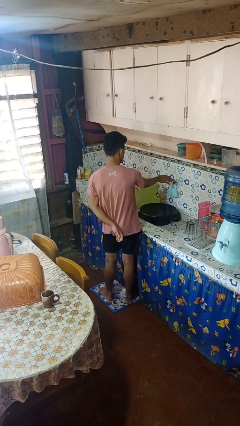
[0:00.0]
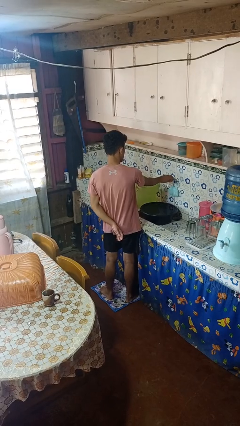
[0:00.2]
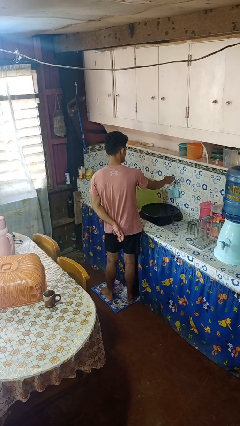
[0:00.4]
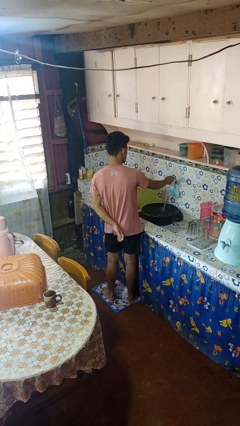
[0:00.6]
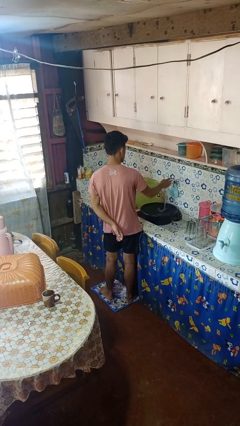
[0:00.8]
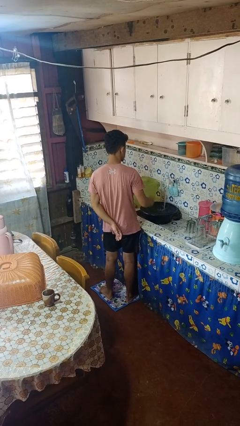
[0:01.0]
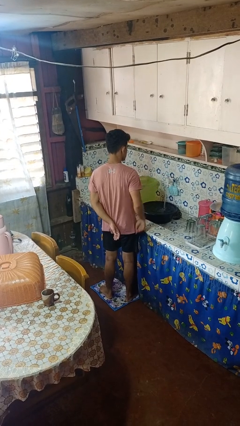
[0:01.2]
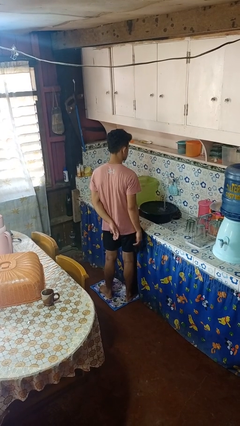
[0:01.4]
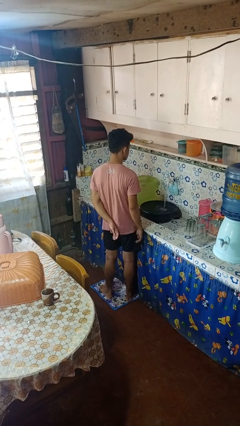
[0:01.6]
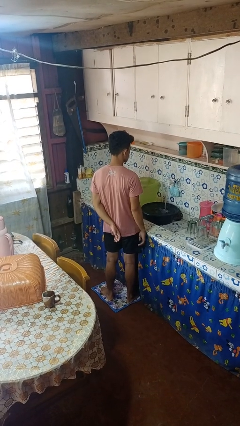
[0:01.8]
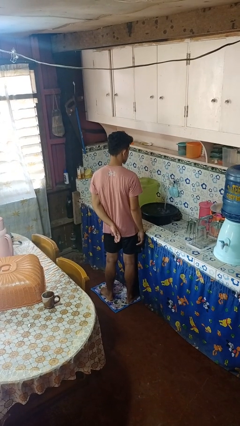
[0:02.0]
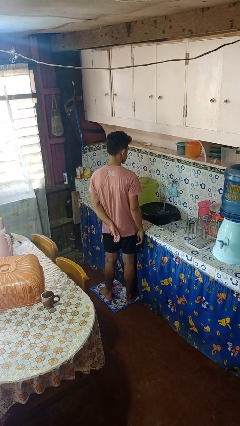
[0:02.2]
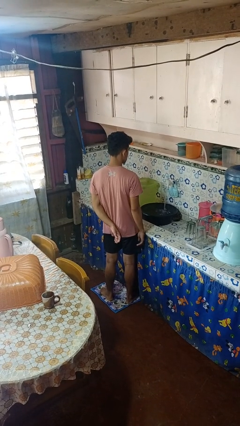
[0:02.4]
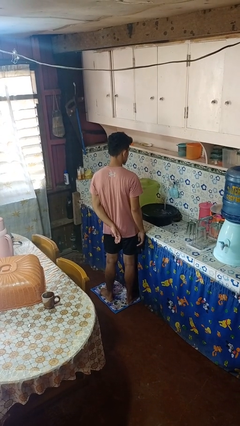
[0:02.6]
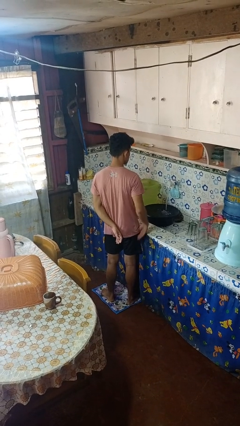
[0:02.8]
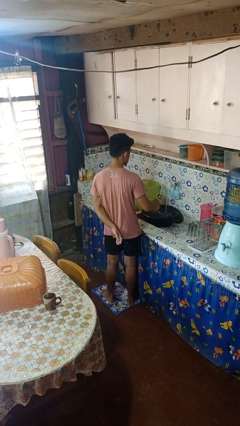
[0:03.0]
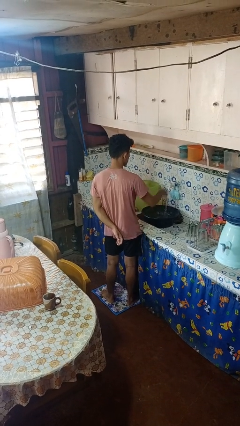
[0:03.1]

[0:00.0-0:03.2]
person turns on faucet

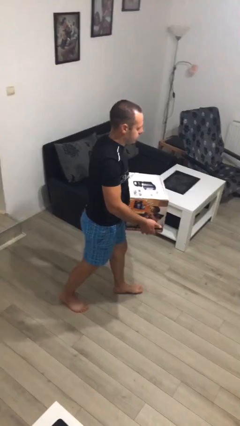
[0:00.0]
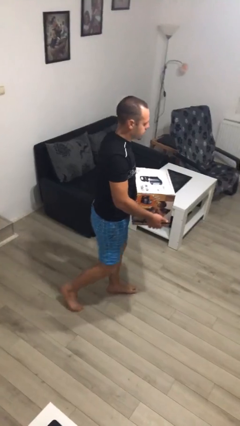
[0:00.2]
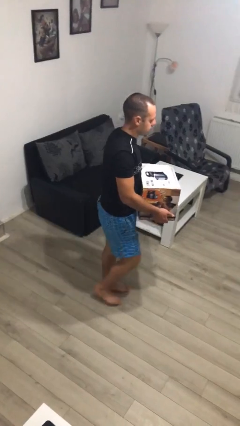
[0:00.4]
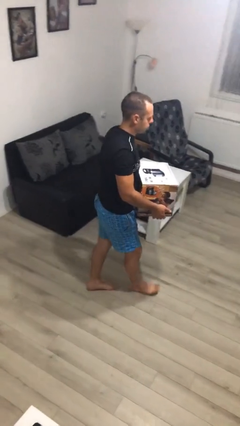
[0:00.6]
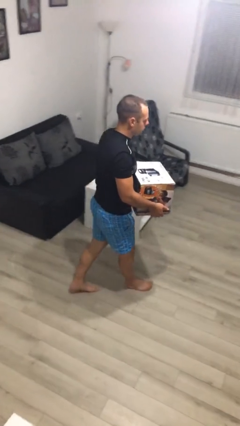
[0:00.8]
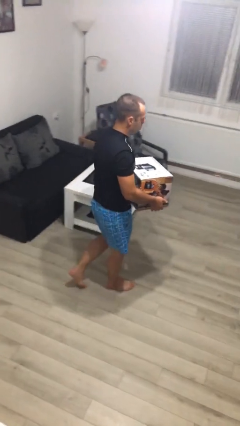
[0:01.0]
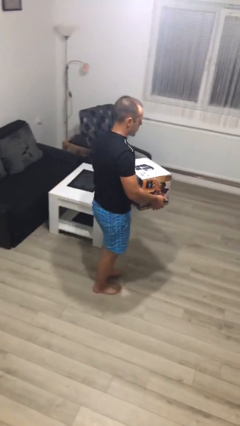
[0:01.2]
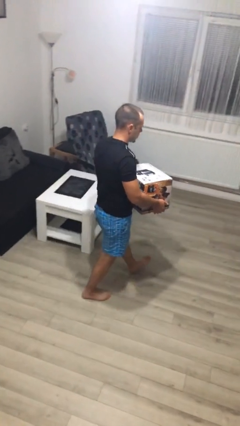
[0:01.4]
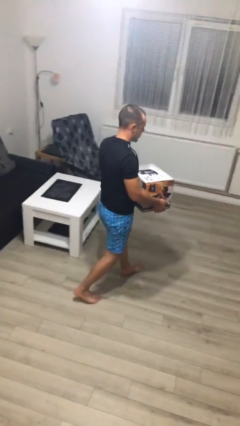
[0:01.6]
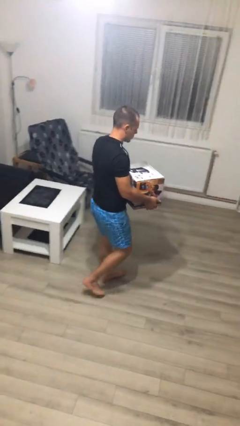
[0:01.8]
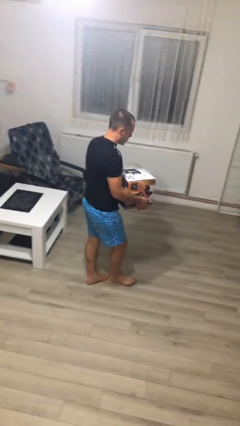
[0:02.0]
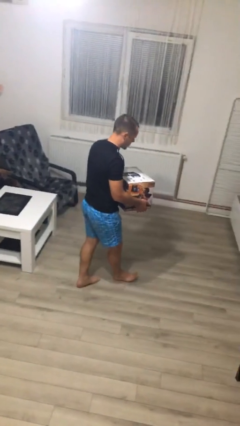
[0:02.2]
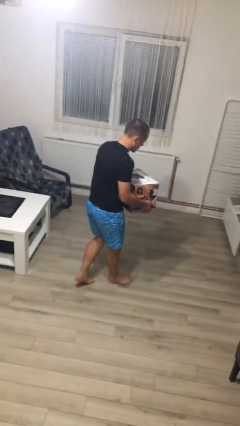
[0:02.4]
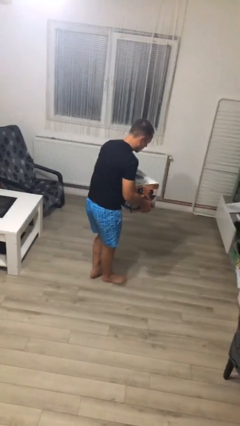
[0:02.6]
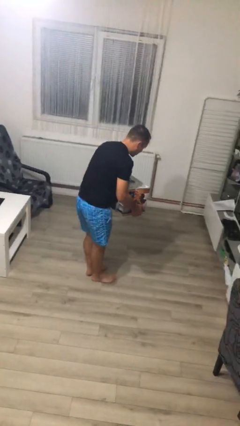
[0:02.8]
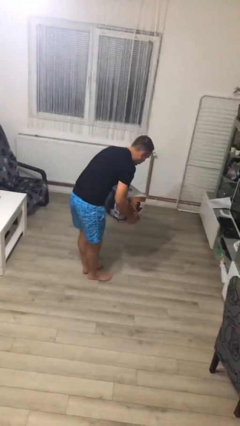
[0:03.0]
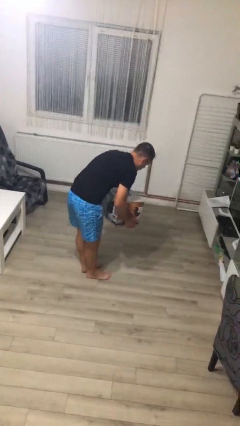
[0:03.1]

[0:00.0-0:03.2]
person carries heavy object

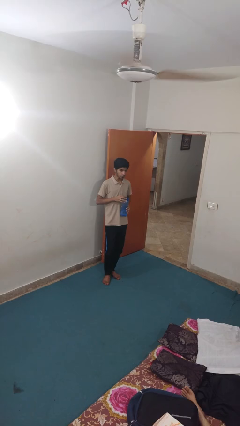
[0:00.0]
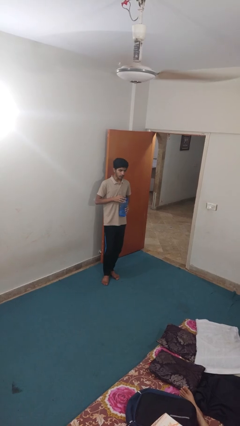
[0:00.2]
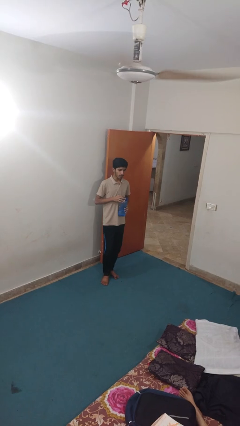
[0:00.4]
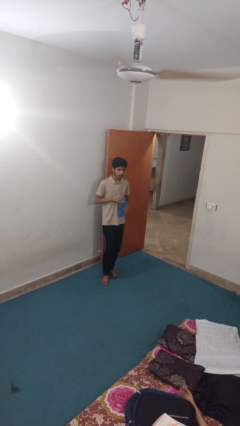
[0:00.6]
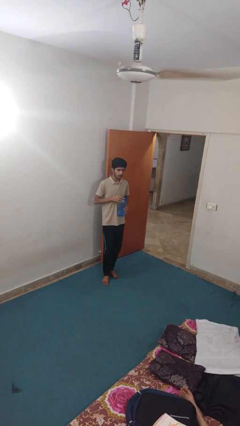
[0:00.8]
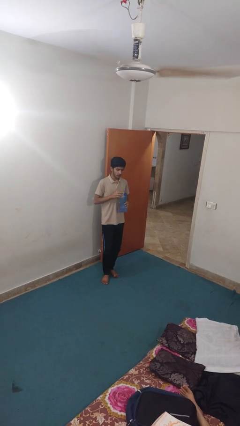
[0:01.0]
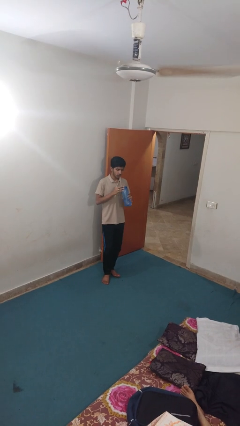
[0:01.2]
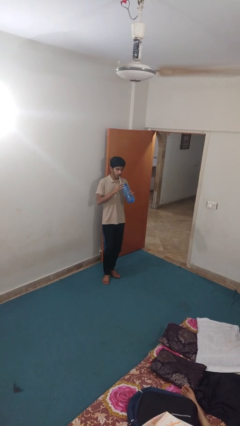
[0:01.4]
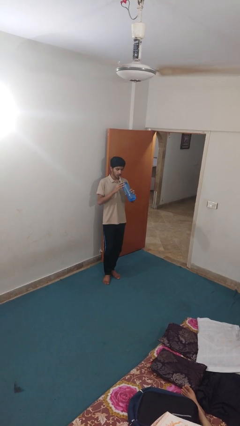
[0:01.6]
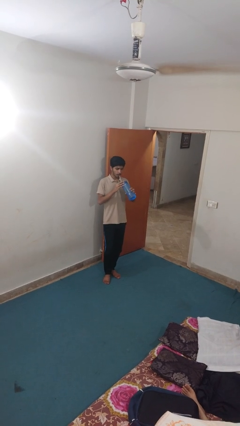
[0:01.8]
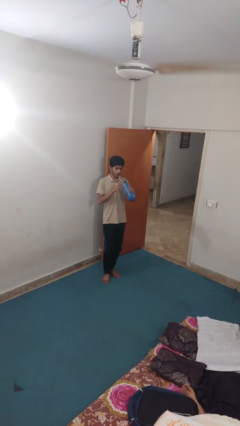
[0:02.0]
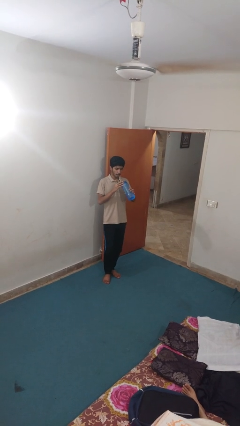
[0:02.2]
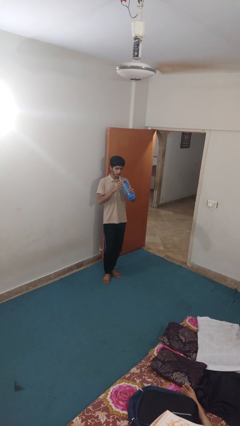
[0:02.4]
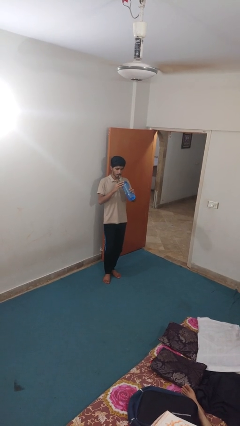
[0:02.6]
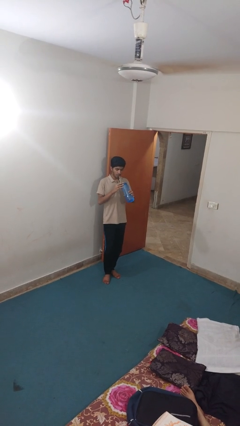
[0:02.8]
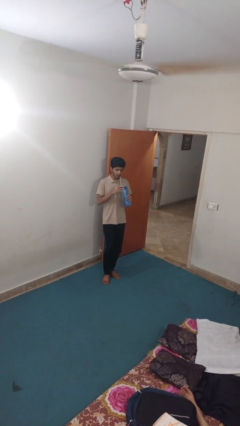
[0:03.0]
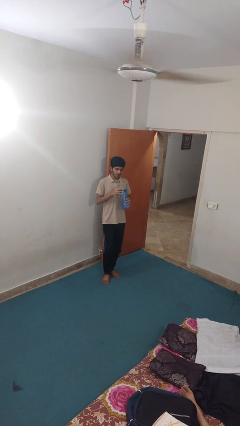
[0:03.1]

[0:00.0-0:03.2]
person drinks from straw

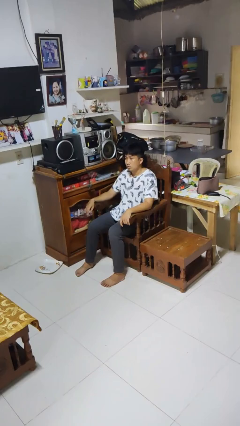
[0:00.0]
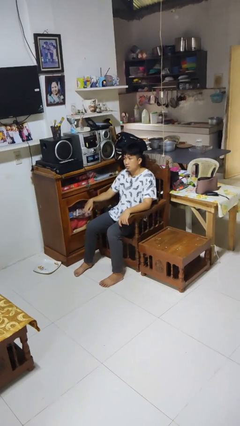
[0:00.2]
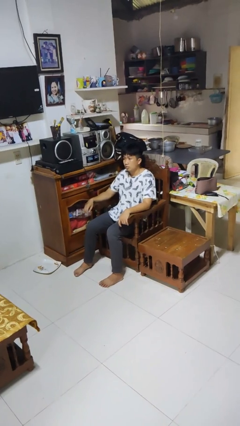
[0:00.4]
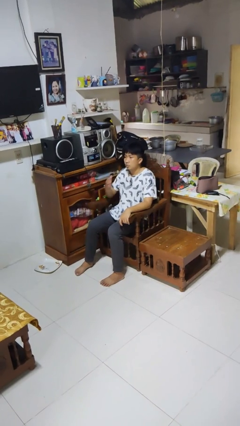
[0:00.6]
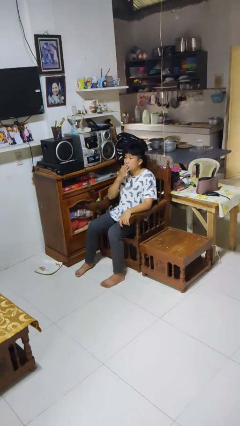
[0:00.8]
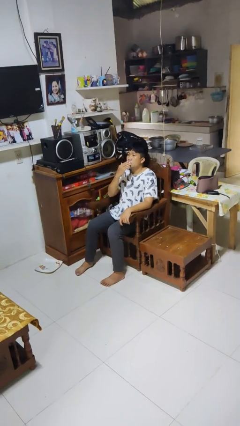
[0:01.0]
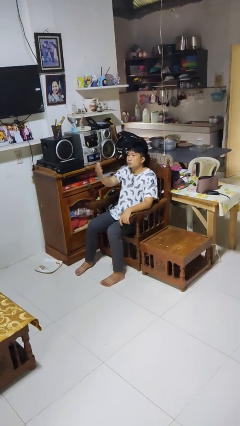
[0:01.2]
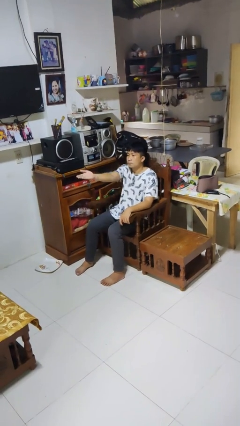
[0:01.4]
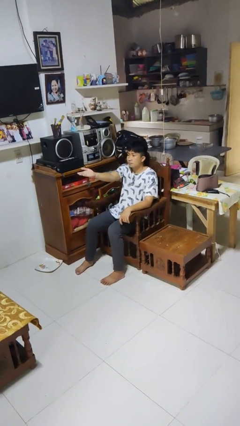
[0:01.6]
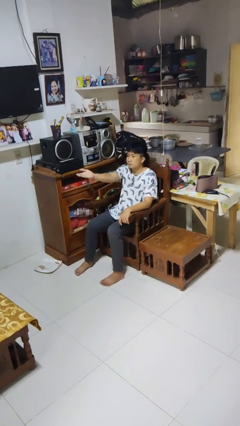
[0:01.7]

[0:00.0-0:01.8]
person gestures blow kiss

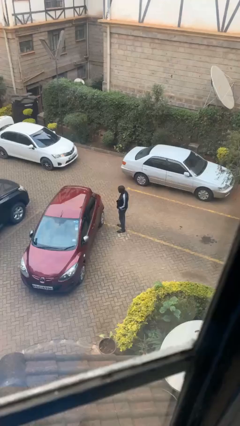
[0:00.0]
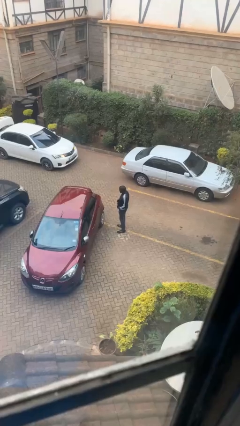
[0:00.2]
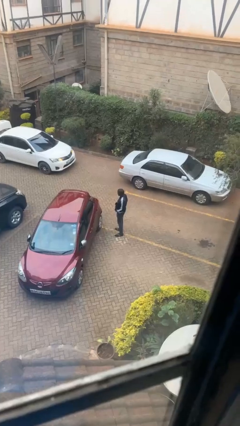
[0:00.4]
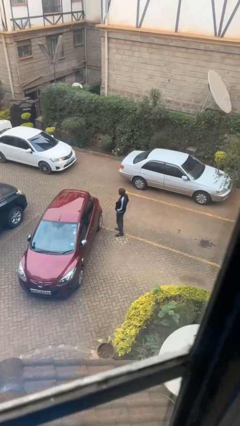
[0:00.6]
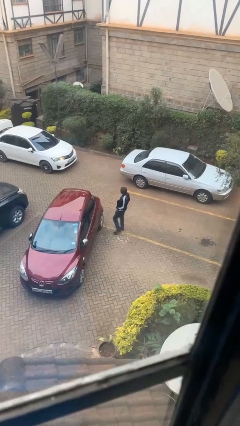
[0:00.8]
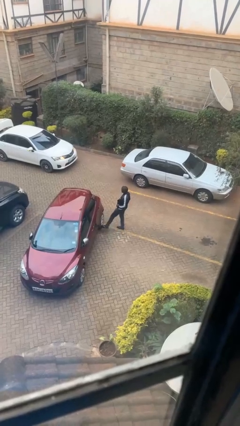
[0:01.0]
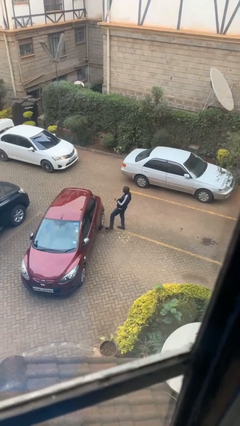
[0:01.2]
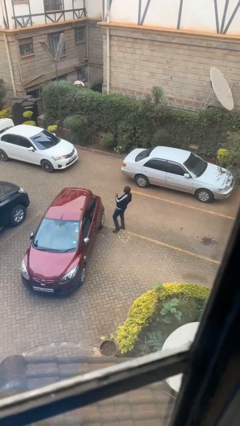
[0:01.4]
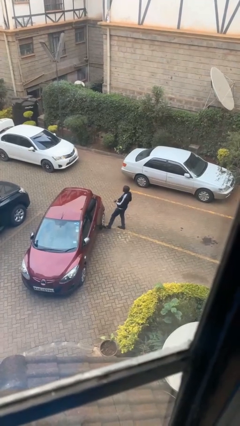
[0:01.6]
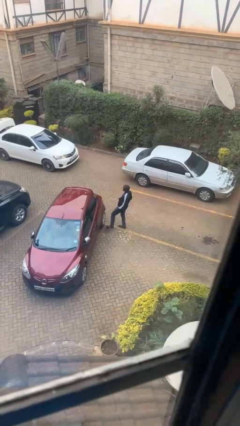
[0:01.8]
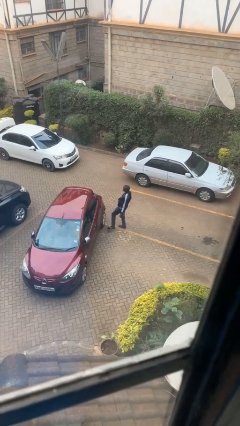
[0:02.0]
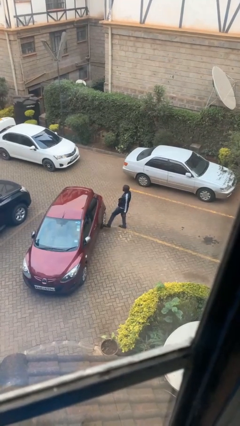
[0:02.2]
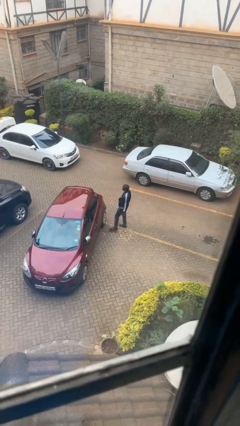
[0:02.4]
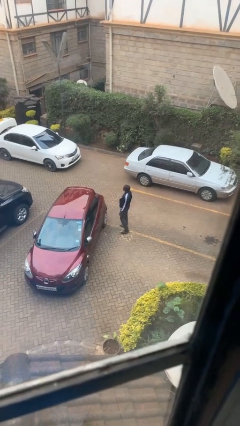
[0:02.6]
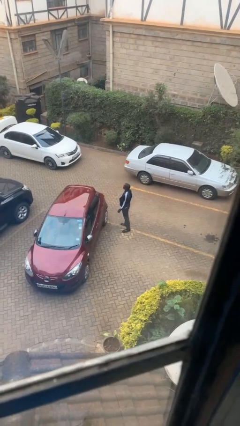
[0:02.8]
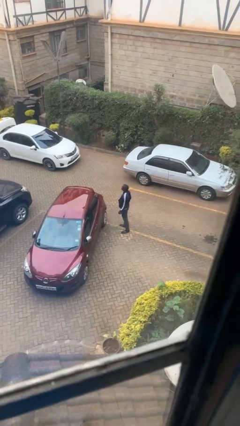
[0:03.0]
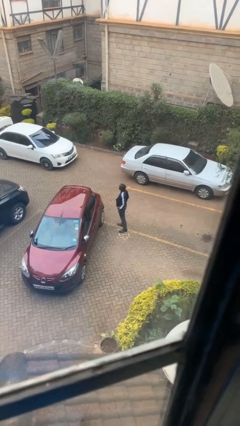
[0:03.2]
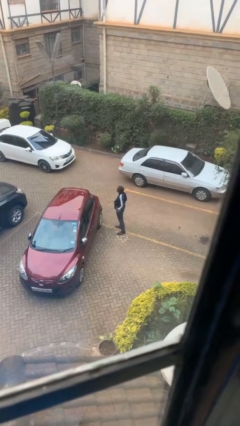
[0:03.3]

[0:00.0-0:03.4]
person kicks car tires

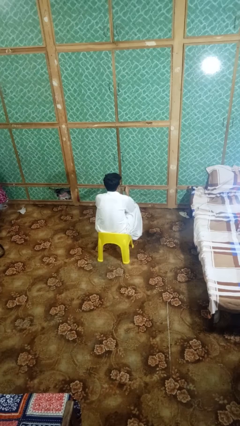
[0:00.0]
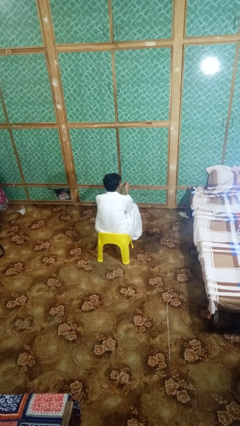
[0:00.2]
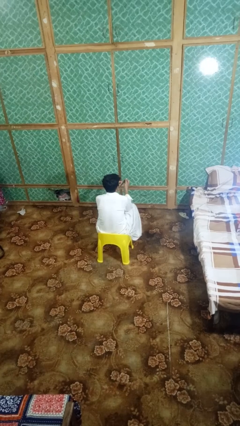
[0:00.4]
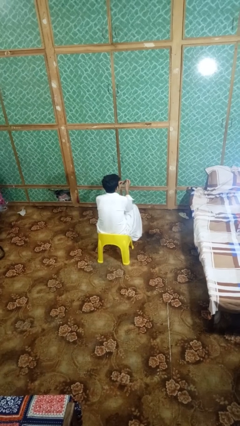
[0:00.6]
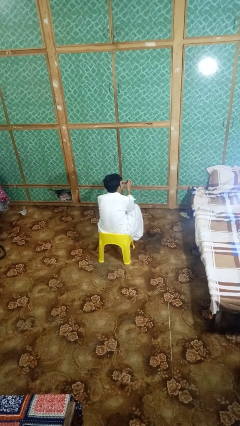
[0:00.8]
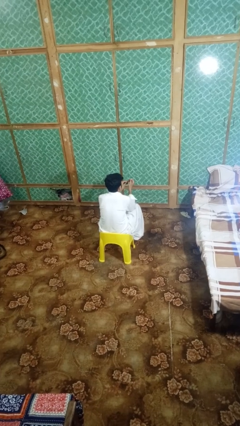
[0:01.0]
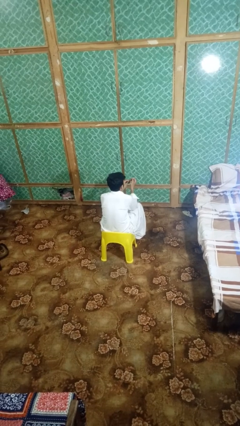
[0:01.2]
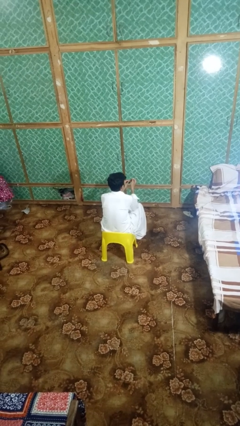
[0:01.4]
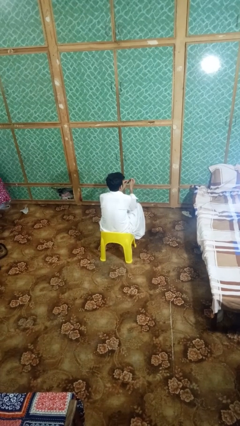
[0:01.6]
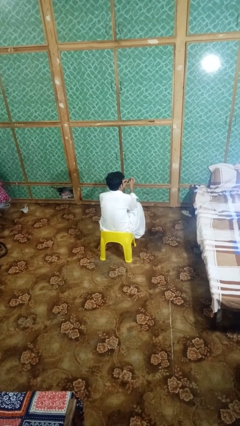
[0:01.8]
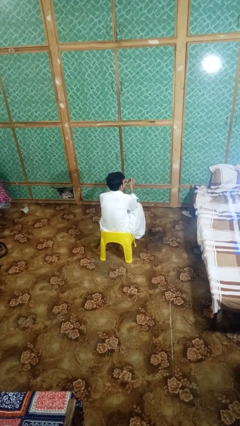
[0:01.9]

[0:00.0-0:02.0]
person files fingernails

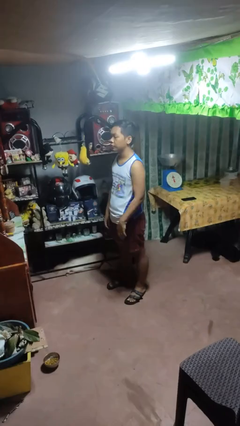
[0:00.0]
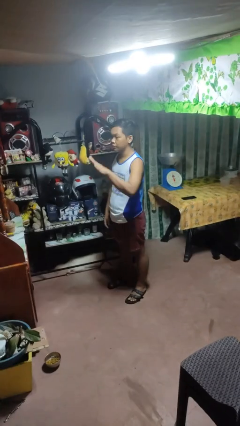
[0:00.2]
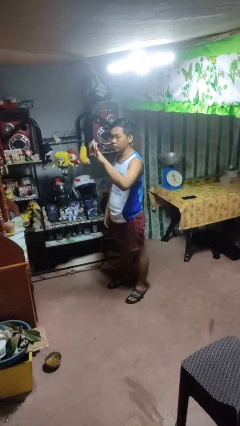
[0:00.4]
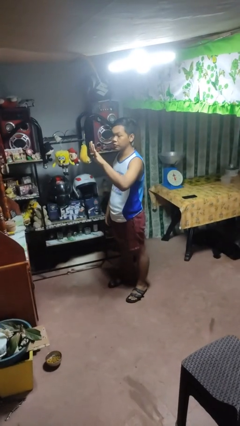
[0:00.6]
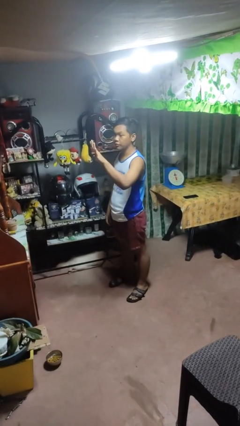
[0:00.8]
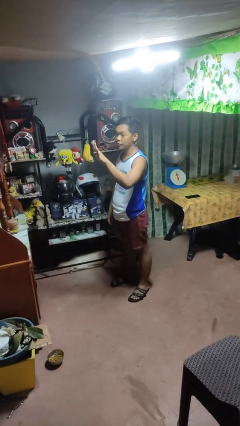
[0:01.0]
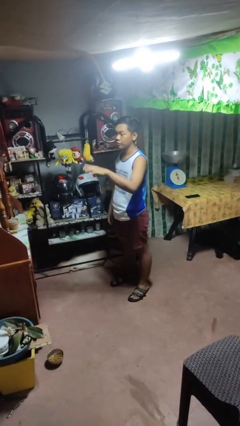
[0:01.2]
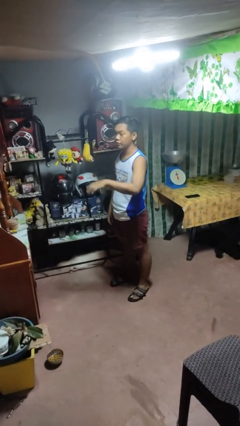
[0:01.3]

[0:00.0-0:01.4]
person gestures number four
